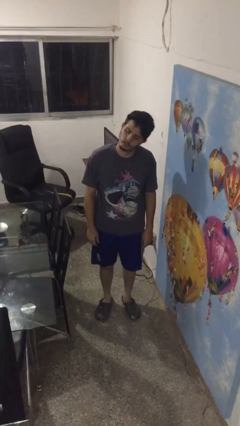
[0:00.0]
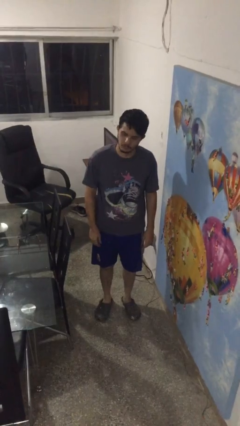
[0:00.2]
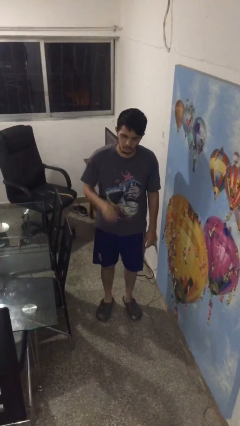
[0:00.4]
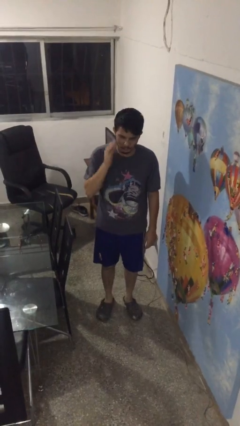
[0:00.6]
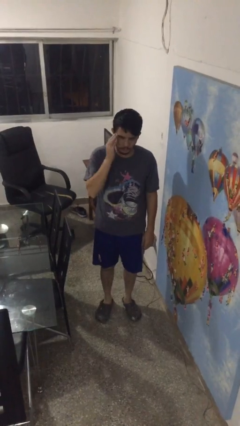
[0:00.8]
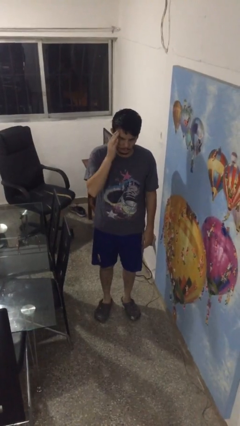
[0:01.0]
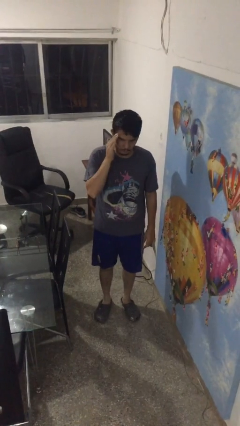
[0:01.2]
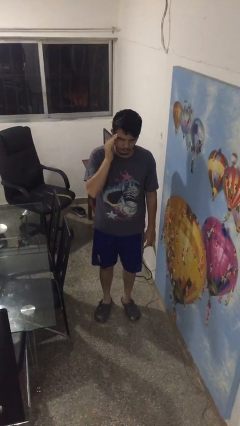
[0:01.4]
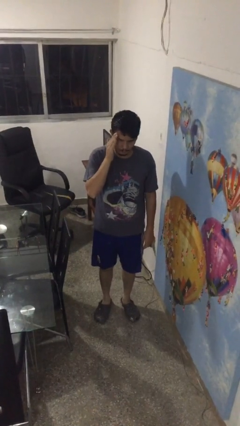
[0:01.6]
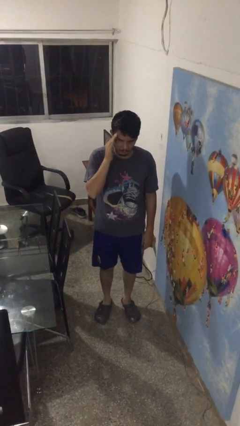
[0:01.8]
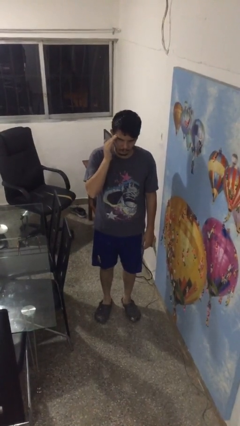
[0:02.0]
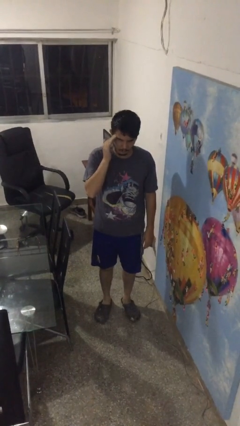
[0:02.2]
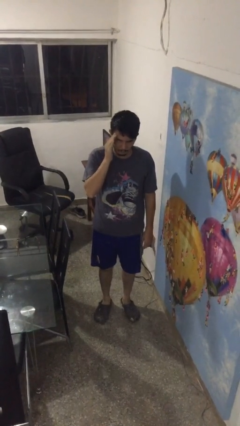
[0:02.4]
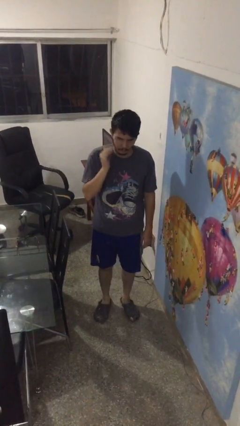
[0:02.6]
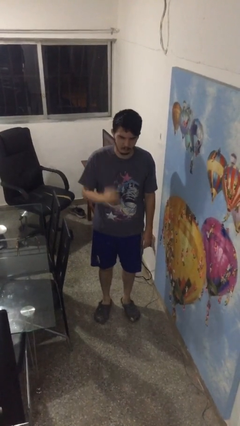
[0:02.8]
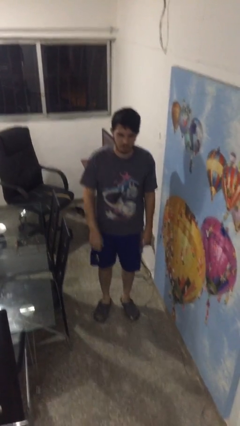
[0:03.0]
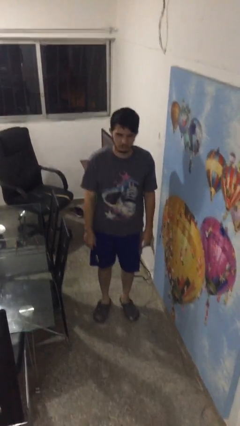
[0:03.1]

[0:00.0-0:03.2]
person scratches face

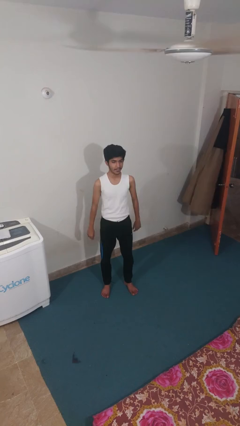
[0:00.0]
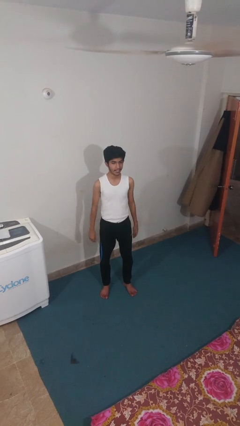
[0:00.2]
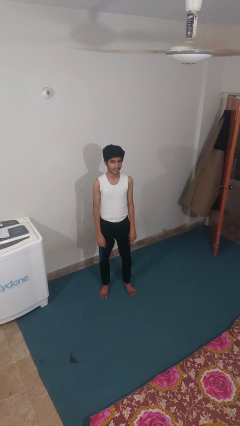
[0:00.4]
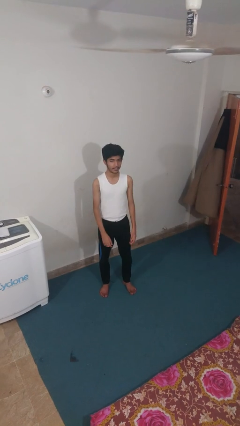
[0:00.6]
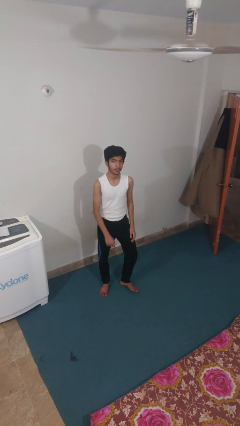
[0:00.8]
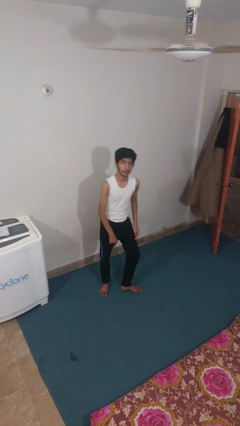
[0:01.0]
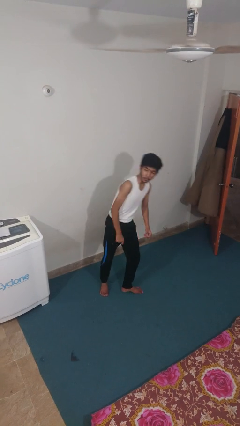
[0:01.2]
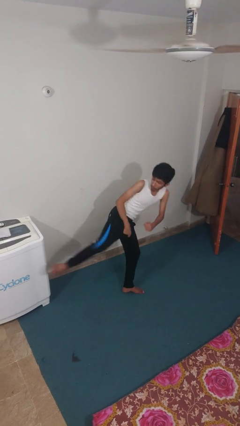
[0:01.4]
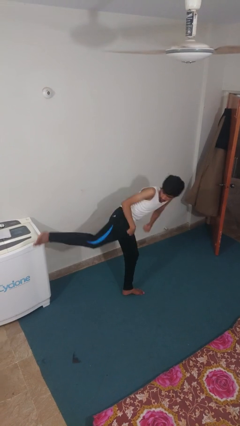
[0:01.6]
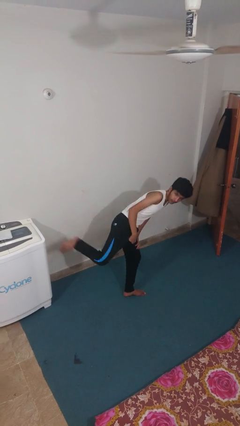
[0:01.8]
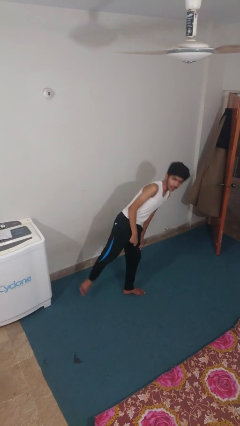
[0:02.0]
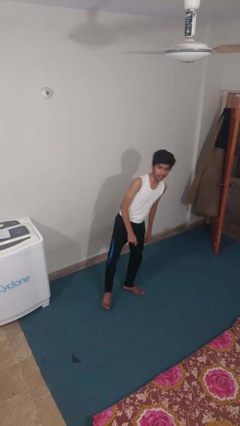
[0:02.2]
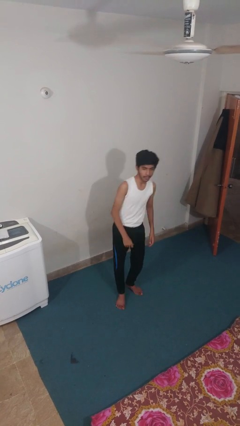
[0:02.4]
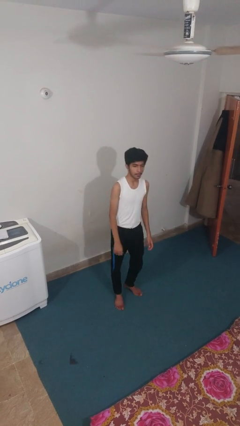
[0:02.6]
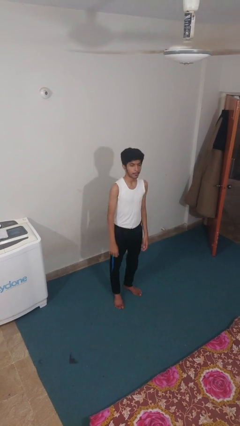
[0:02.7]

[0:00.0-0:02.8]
person karate kicks

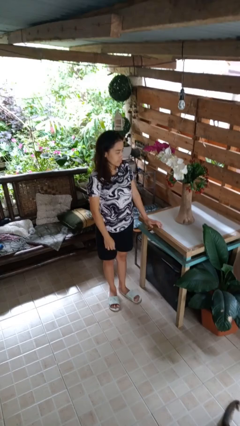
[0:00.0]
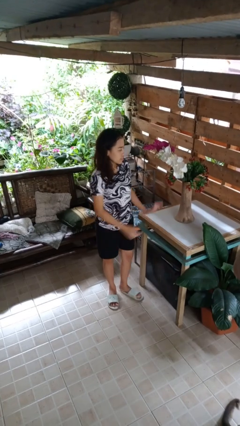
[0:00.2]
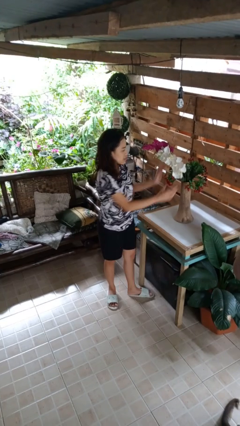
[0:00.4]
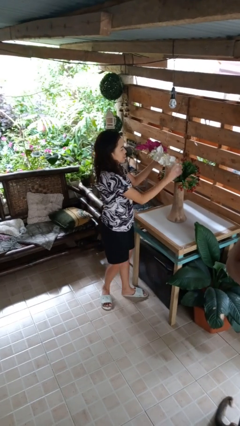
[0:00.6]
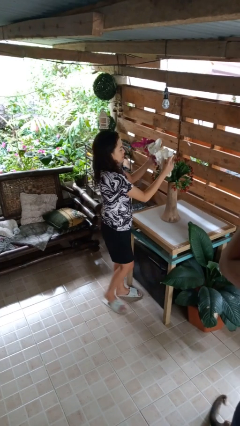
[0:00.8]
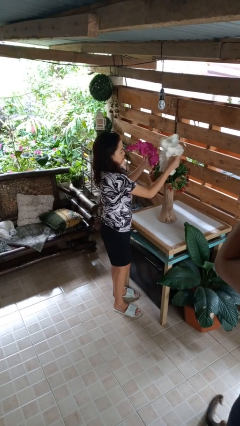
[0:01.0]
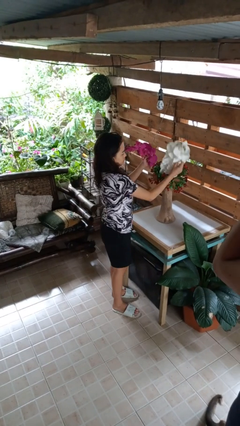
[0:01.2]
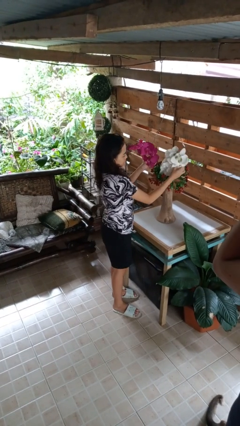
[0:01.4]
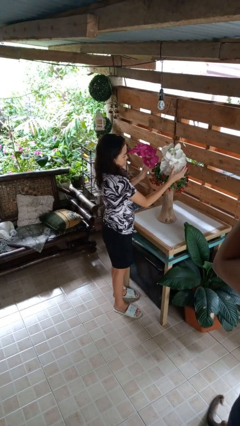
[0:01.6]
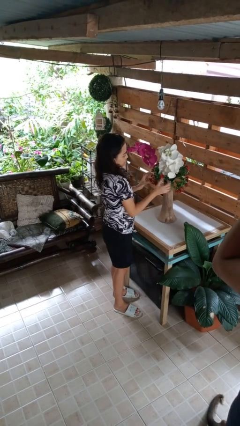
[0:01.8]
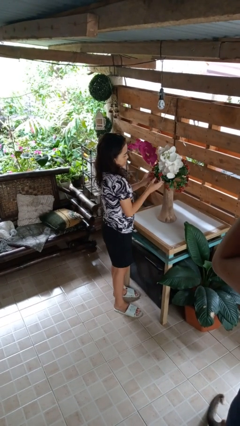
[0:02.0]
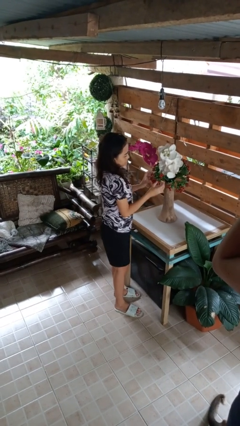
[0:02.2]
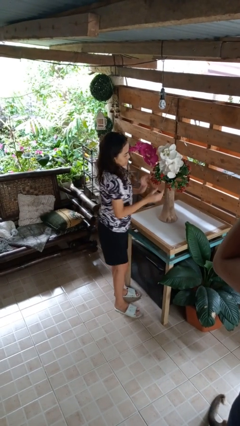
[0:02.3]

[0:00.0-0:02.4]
person arranges flowers in vase

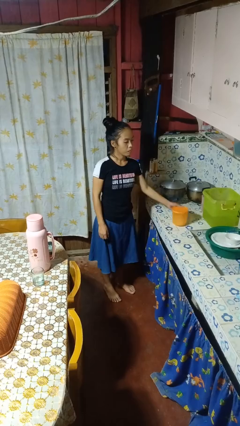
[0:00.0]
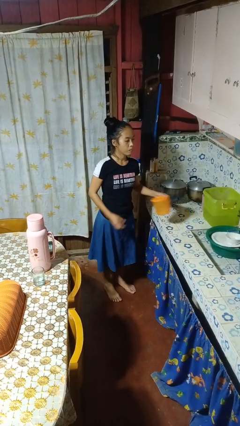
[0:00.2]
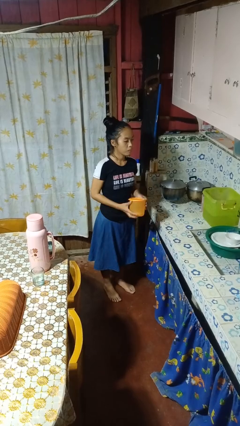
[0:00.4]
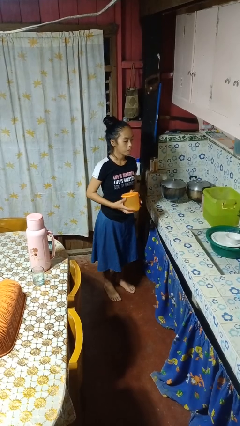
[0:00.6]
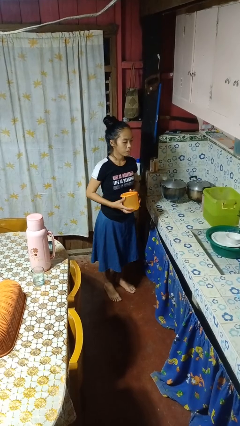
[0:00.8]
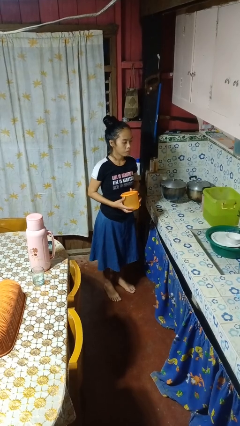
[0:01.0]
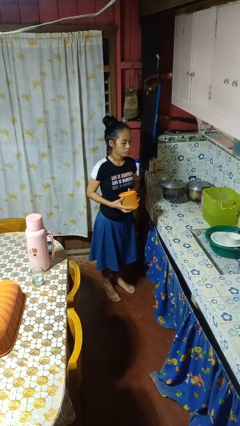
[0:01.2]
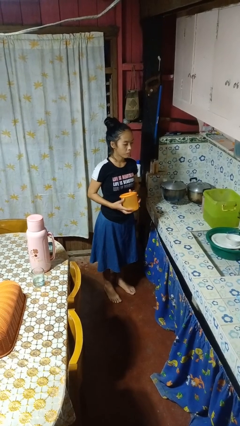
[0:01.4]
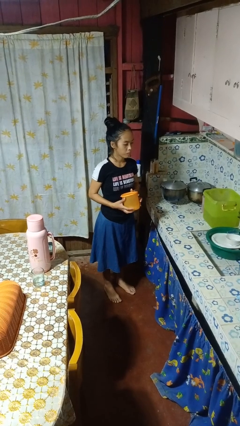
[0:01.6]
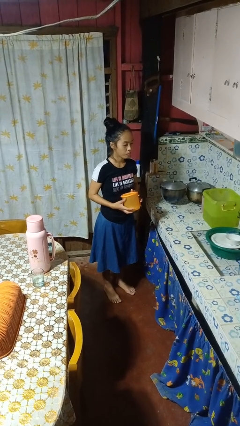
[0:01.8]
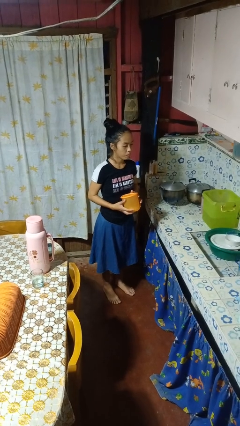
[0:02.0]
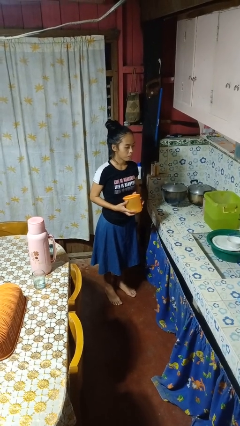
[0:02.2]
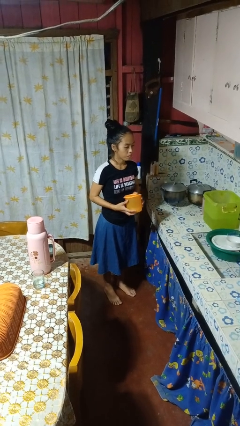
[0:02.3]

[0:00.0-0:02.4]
person picks up object from countertop

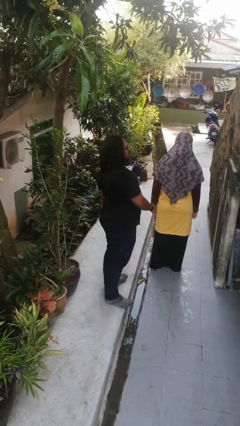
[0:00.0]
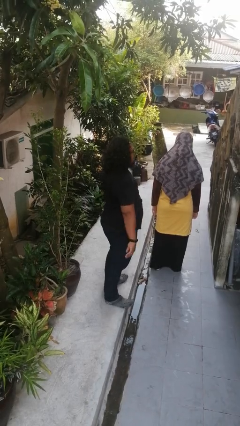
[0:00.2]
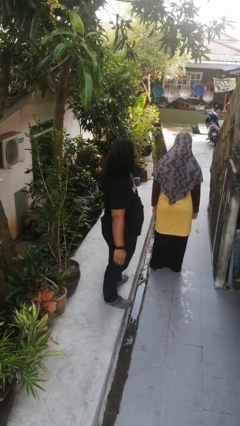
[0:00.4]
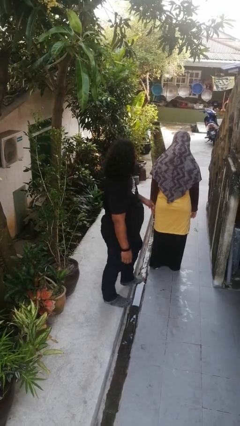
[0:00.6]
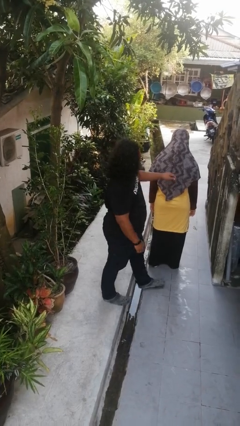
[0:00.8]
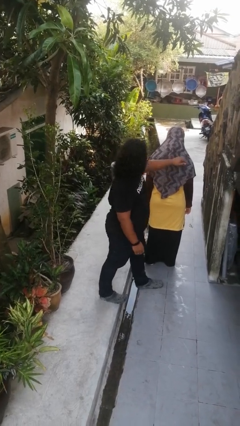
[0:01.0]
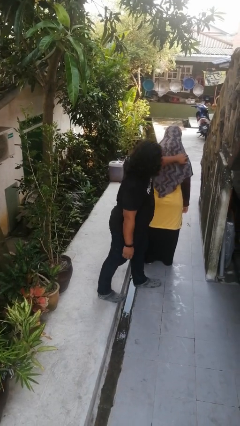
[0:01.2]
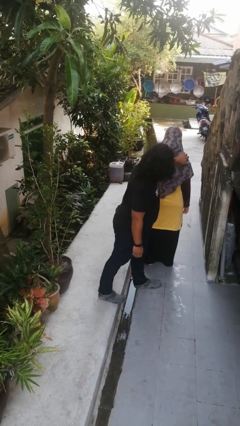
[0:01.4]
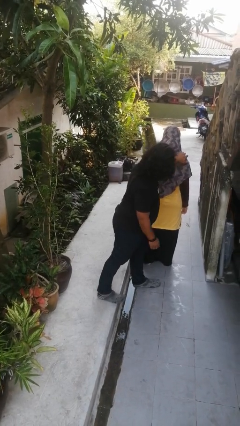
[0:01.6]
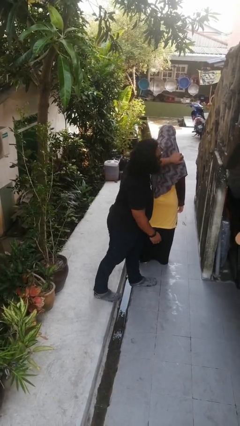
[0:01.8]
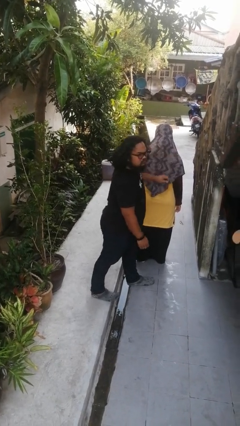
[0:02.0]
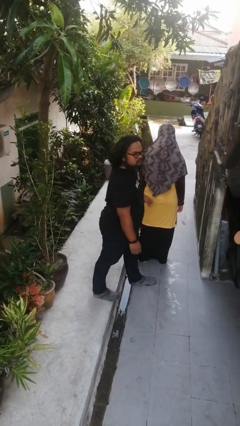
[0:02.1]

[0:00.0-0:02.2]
person touches back of person

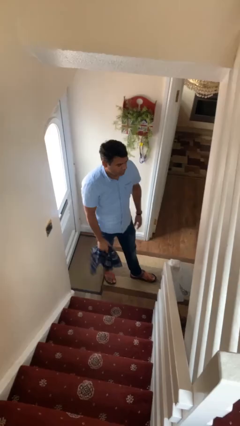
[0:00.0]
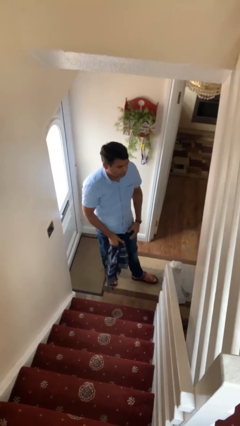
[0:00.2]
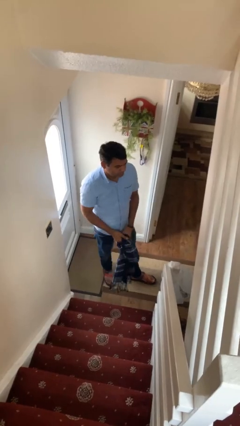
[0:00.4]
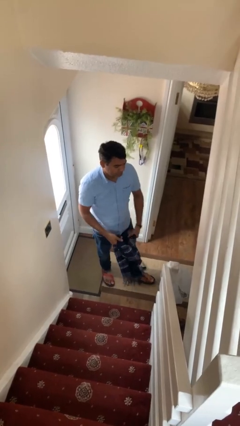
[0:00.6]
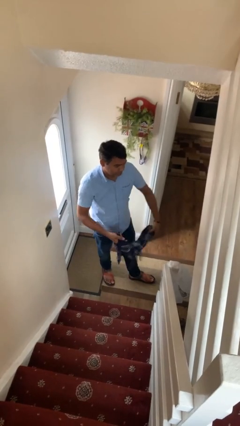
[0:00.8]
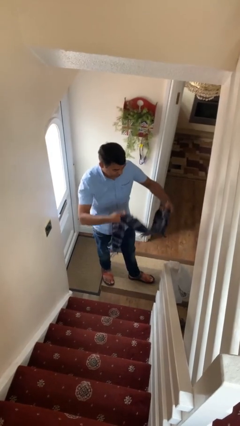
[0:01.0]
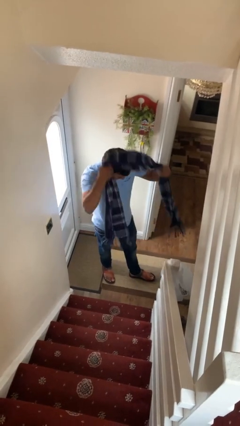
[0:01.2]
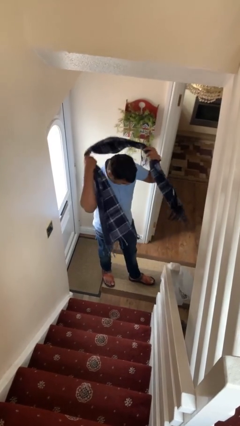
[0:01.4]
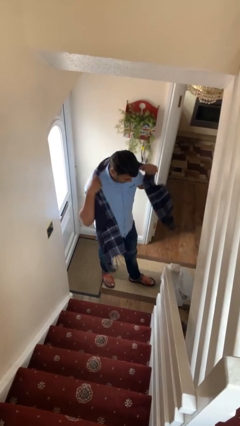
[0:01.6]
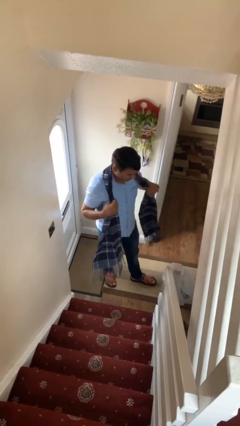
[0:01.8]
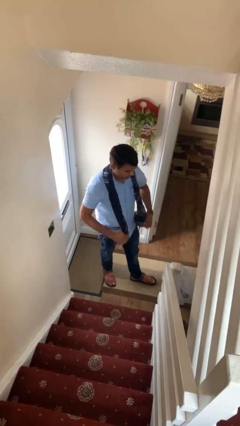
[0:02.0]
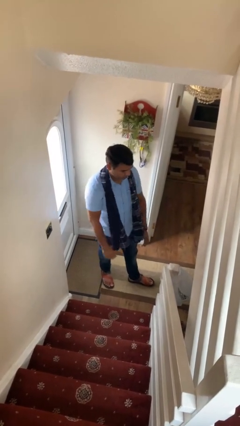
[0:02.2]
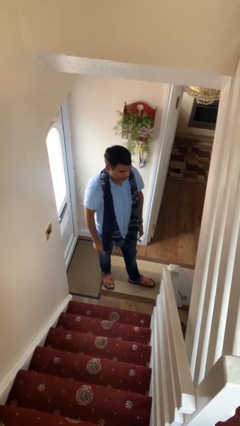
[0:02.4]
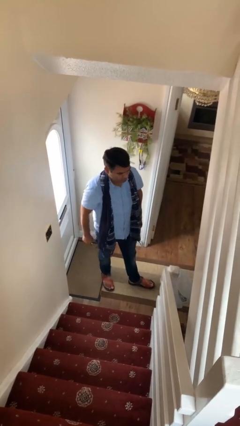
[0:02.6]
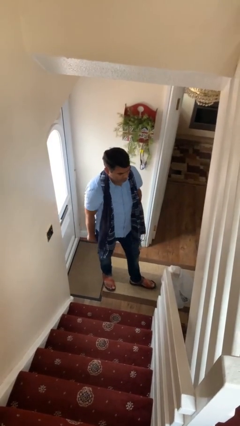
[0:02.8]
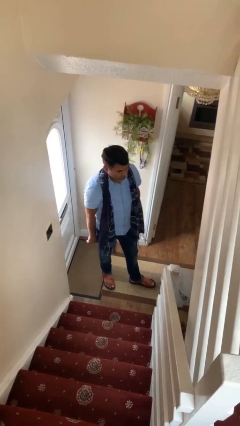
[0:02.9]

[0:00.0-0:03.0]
person puts on scarf

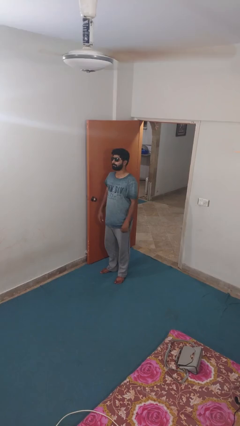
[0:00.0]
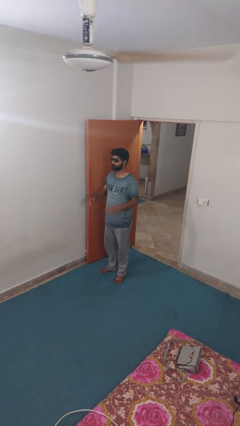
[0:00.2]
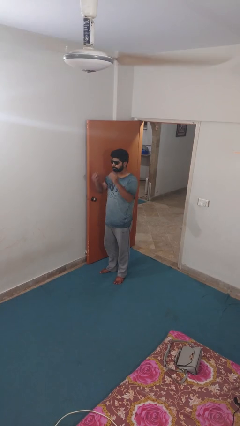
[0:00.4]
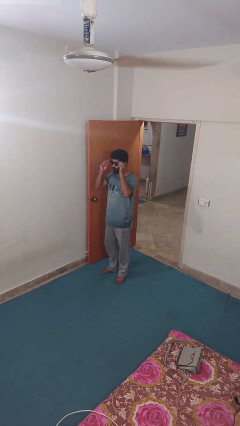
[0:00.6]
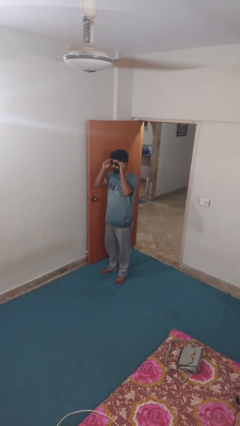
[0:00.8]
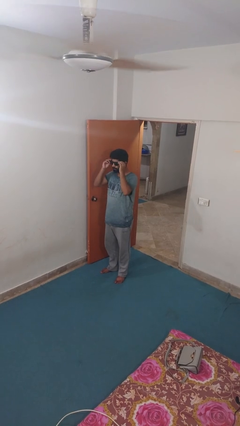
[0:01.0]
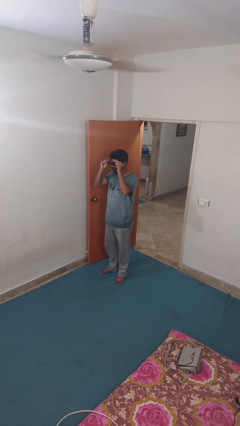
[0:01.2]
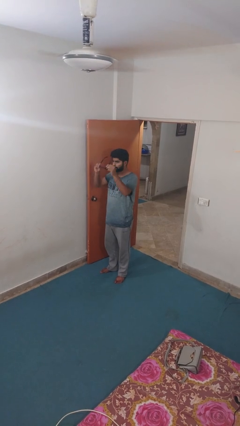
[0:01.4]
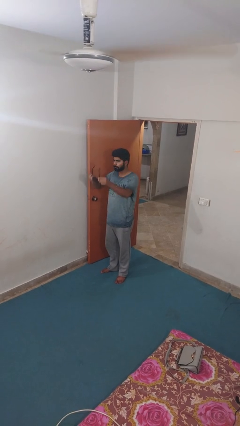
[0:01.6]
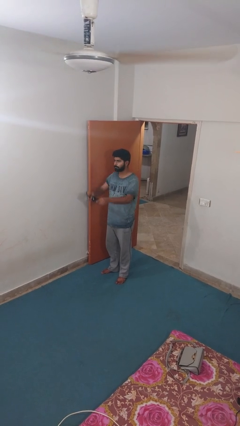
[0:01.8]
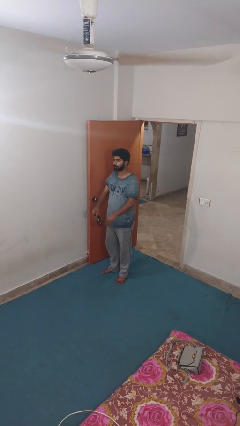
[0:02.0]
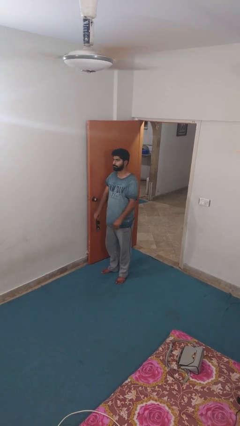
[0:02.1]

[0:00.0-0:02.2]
person takes off sunglasses
